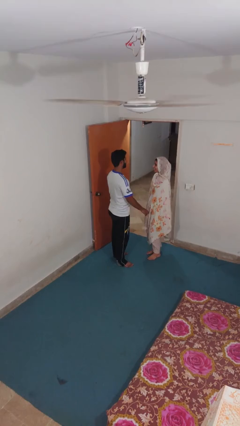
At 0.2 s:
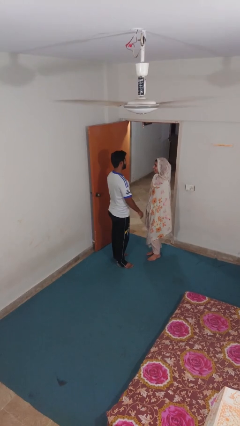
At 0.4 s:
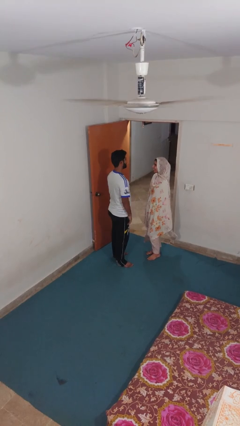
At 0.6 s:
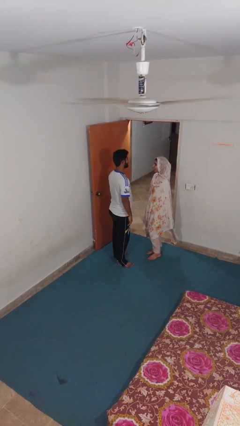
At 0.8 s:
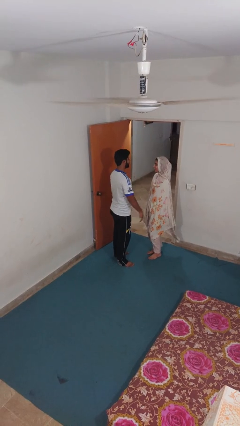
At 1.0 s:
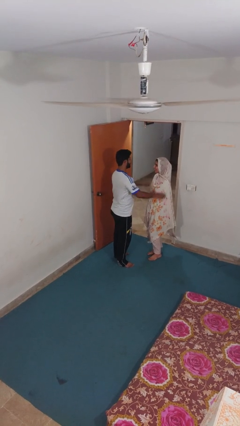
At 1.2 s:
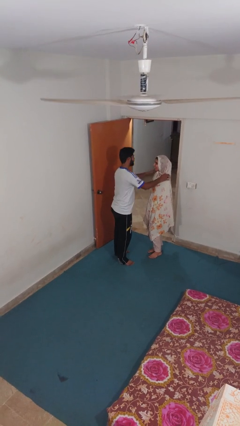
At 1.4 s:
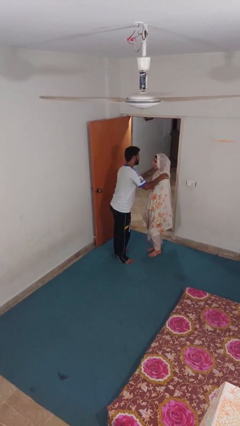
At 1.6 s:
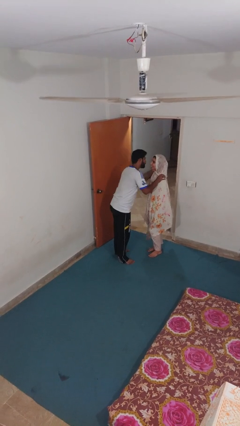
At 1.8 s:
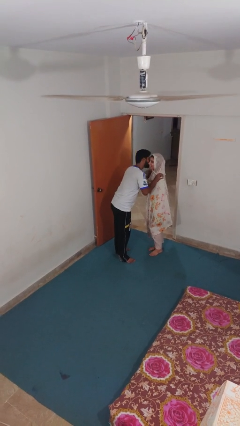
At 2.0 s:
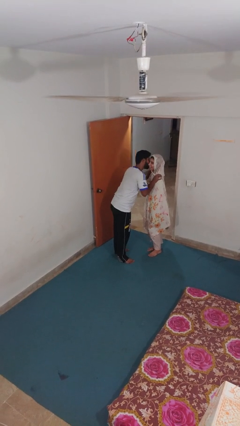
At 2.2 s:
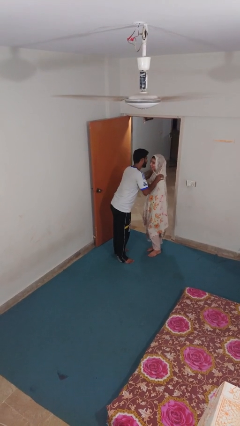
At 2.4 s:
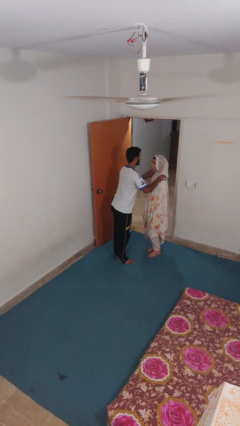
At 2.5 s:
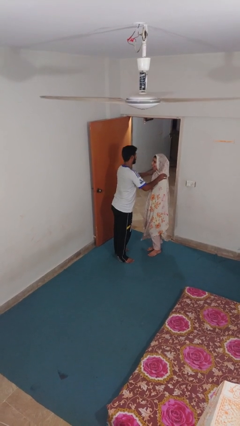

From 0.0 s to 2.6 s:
person kisses cheek of person

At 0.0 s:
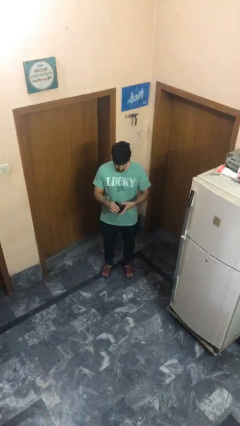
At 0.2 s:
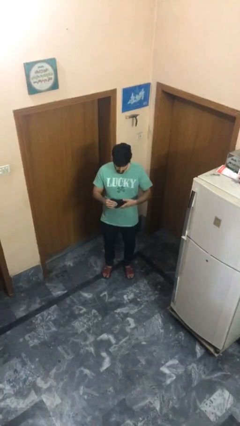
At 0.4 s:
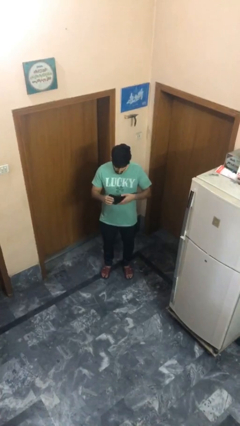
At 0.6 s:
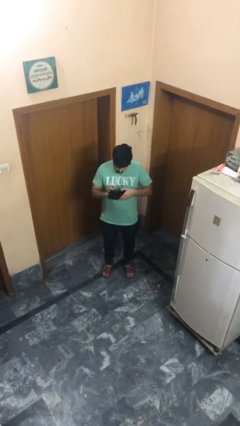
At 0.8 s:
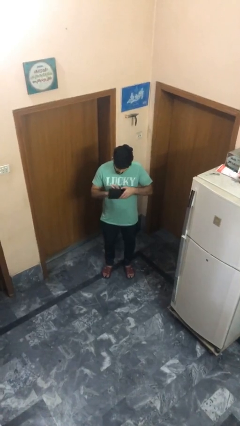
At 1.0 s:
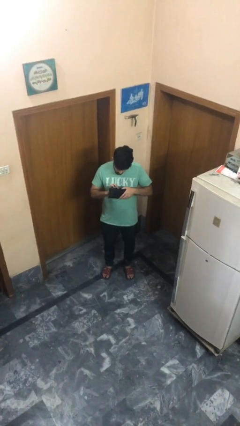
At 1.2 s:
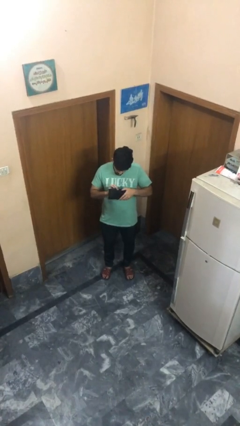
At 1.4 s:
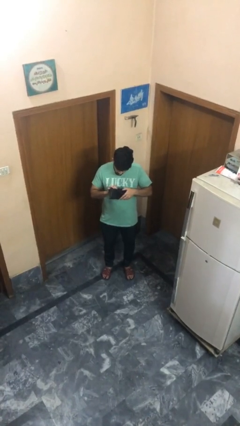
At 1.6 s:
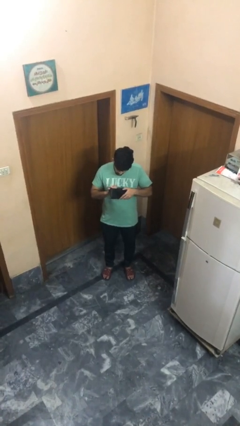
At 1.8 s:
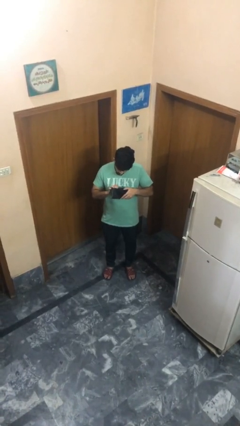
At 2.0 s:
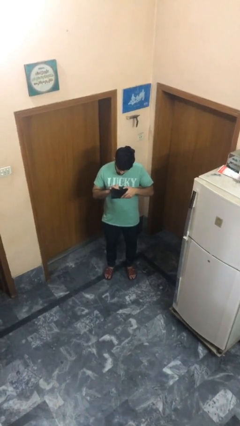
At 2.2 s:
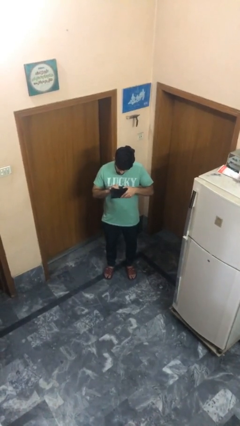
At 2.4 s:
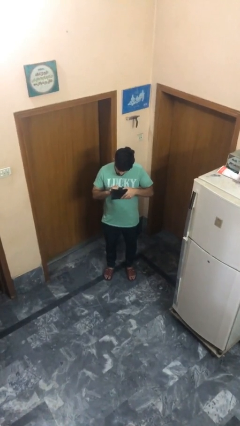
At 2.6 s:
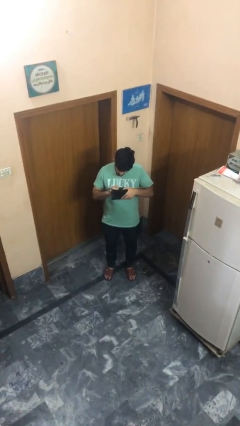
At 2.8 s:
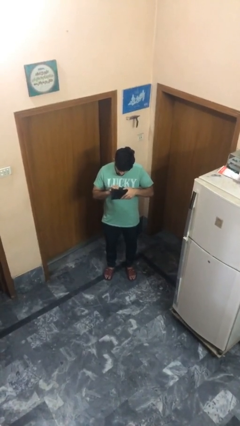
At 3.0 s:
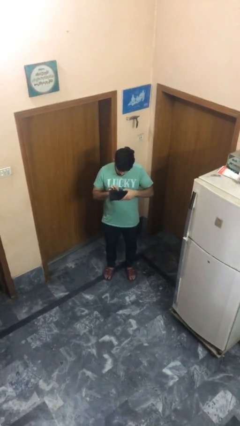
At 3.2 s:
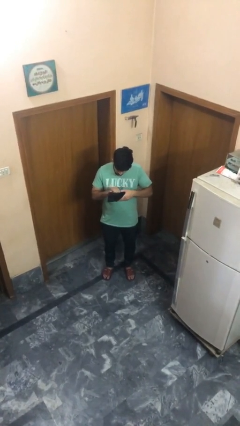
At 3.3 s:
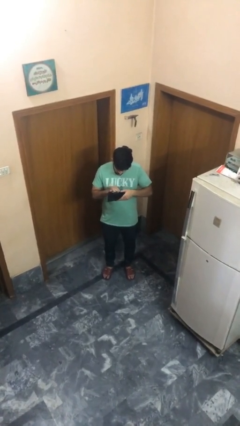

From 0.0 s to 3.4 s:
person searches in purse

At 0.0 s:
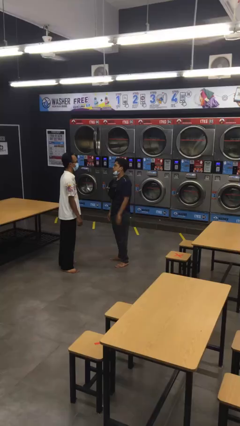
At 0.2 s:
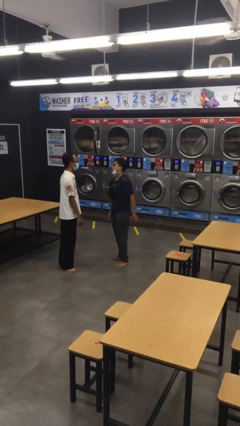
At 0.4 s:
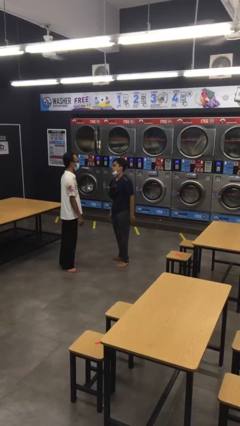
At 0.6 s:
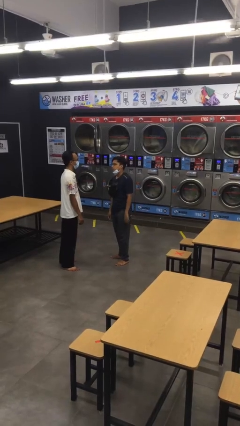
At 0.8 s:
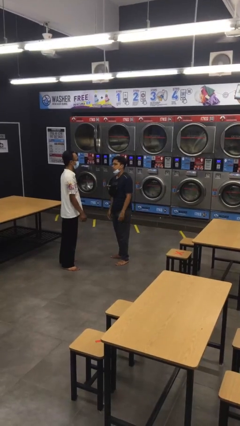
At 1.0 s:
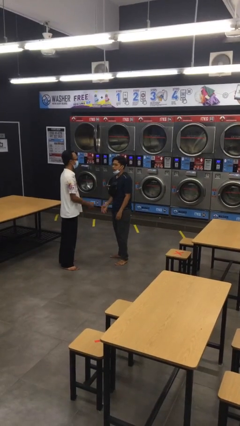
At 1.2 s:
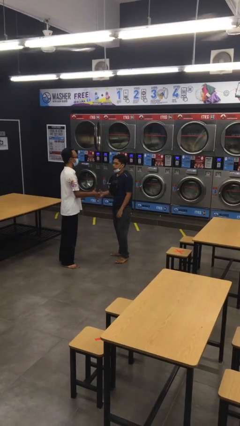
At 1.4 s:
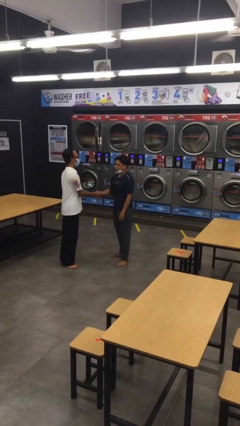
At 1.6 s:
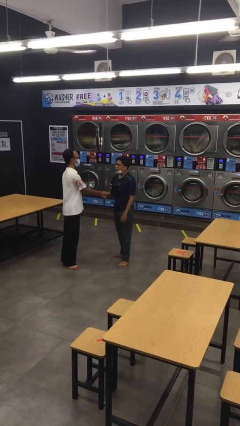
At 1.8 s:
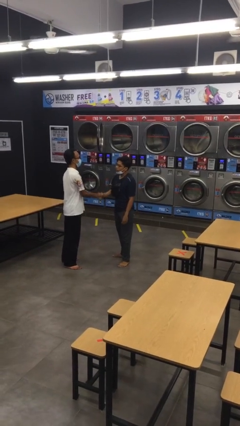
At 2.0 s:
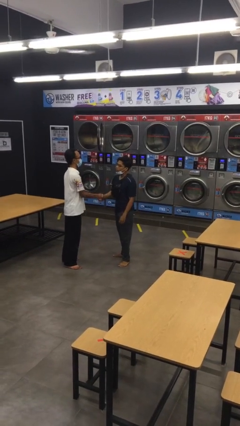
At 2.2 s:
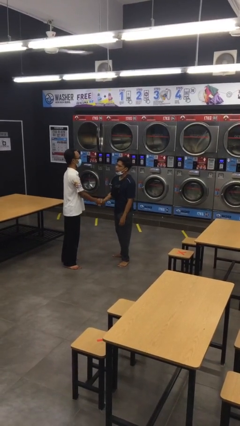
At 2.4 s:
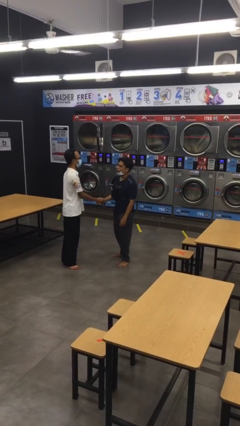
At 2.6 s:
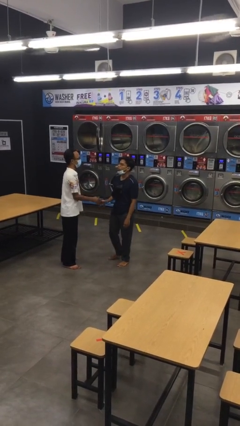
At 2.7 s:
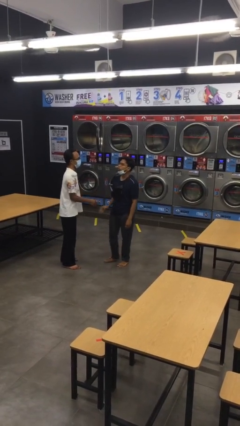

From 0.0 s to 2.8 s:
person shakes hand

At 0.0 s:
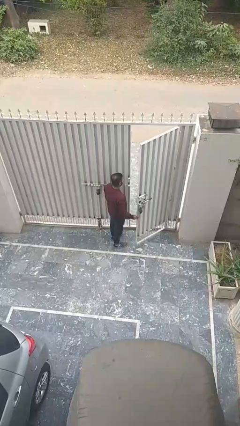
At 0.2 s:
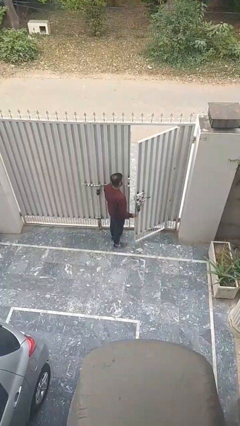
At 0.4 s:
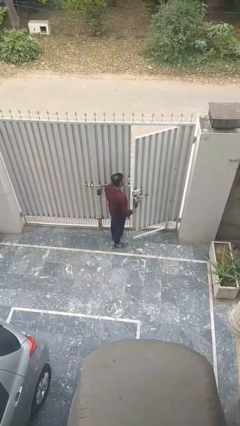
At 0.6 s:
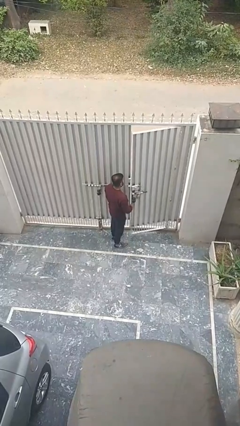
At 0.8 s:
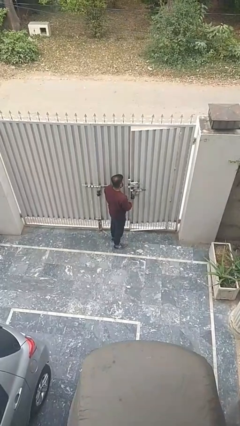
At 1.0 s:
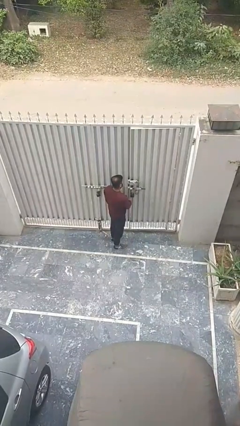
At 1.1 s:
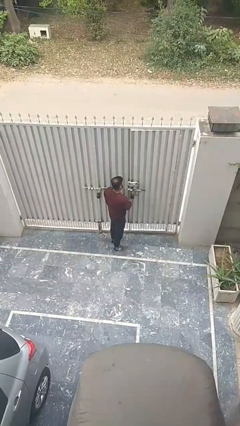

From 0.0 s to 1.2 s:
person closes facility door

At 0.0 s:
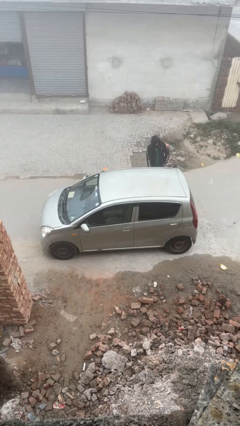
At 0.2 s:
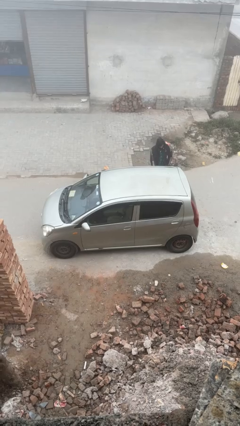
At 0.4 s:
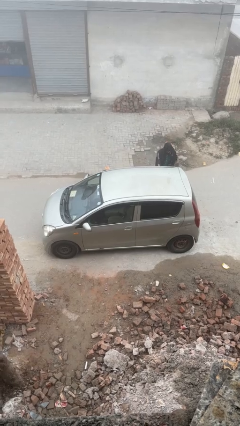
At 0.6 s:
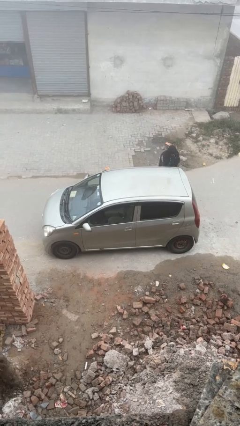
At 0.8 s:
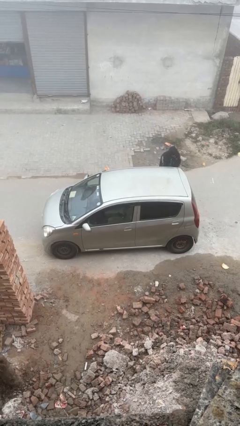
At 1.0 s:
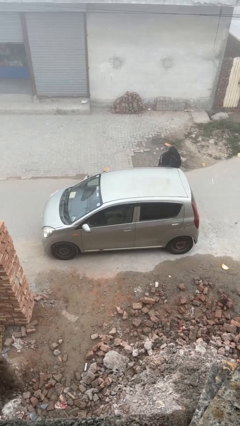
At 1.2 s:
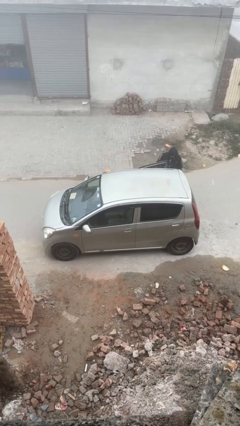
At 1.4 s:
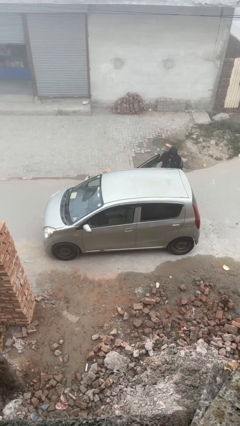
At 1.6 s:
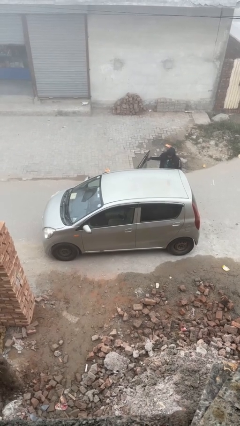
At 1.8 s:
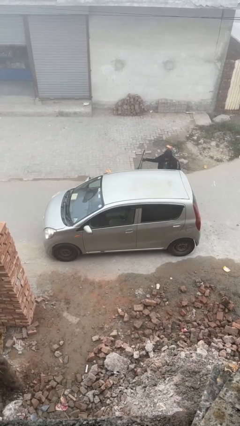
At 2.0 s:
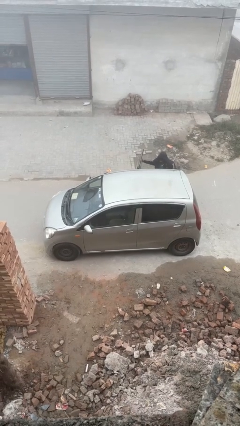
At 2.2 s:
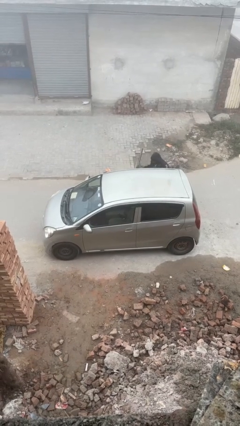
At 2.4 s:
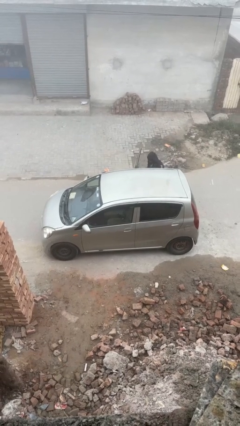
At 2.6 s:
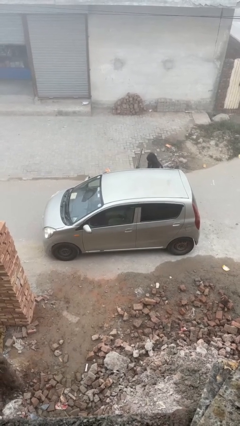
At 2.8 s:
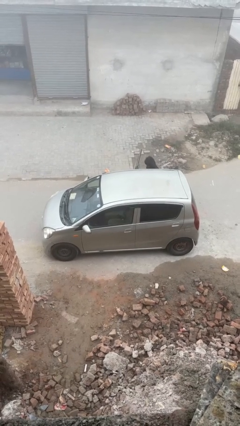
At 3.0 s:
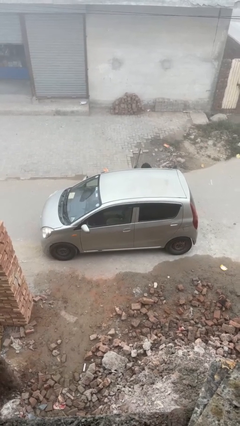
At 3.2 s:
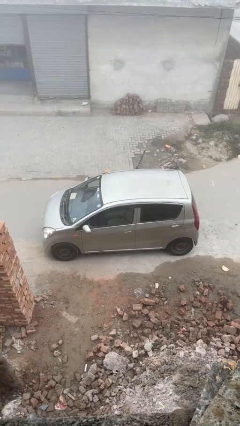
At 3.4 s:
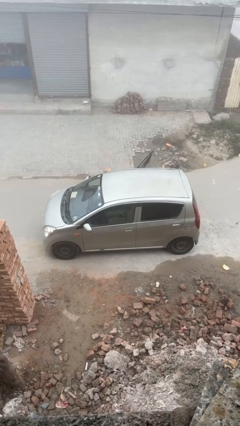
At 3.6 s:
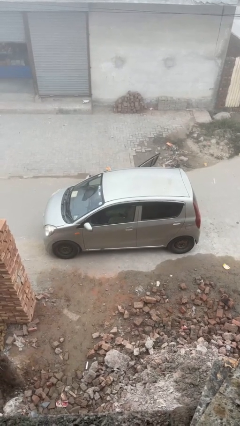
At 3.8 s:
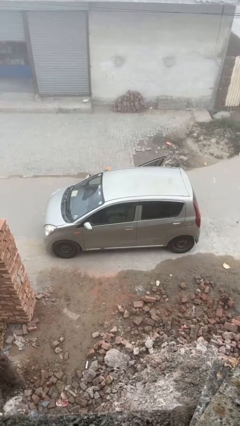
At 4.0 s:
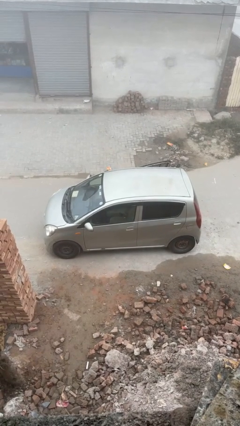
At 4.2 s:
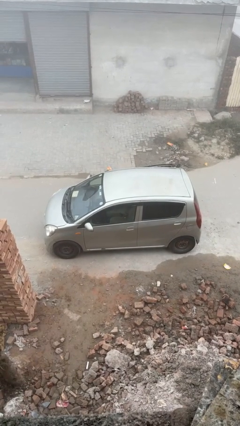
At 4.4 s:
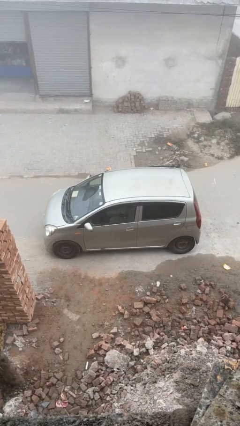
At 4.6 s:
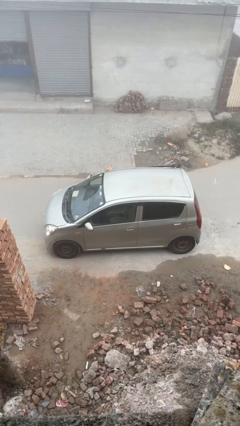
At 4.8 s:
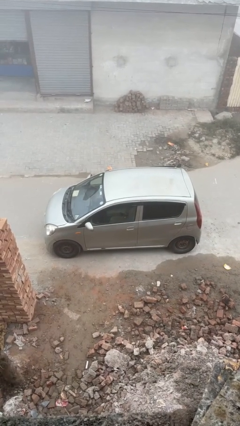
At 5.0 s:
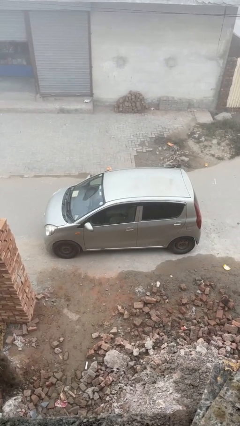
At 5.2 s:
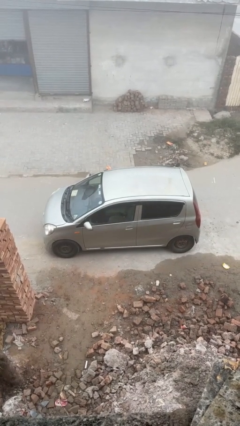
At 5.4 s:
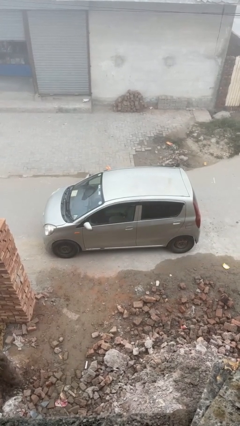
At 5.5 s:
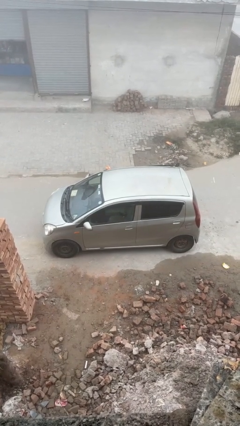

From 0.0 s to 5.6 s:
car picks up person

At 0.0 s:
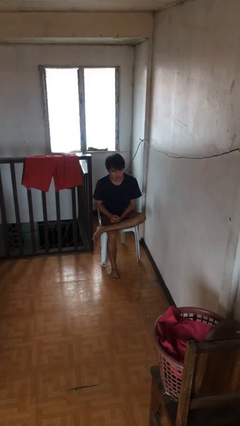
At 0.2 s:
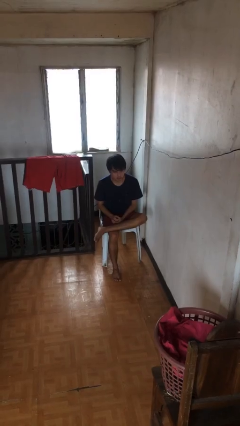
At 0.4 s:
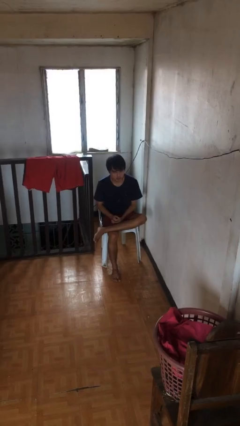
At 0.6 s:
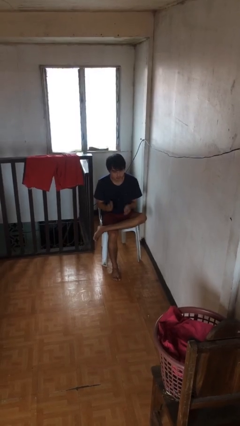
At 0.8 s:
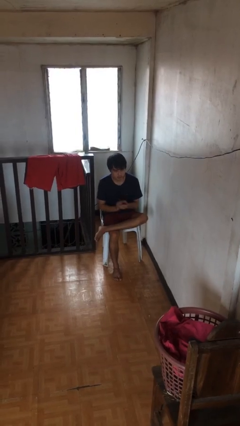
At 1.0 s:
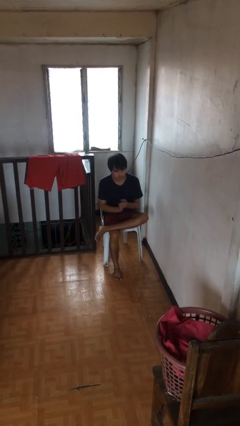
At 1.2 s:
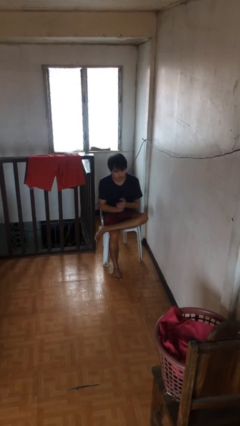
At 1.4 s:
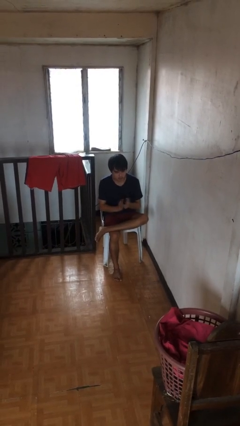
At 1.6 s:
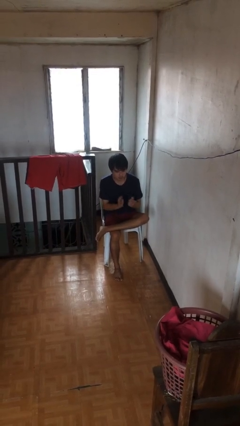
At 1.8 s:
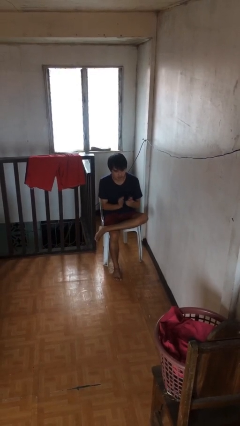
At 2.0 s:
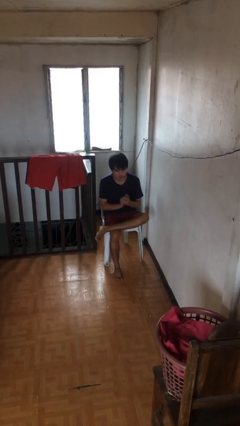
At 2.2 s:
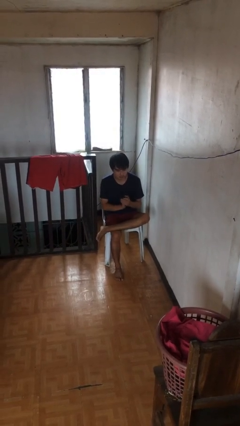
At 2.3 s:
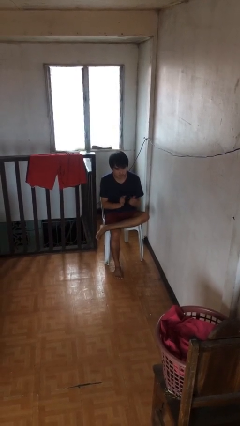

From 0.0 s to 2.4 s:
person claps hands
